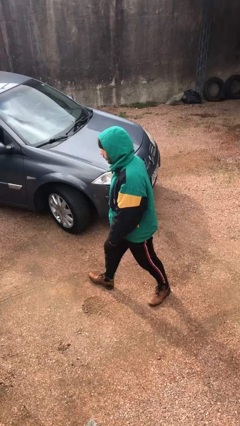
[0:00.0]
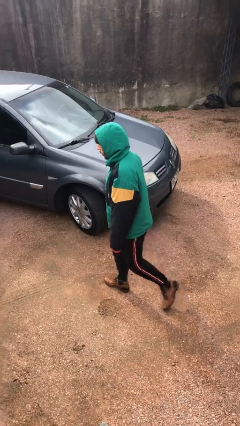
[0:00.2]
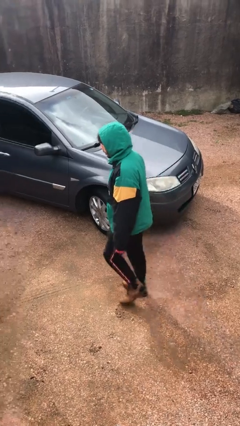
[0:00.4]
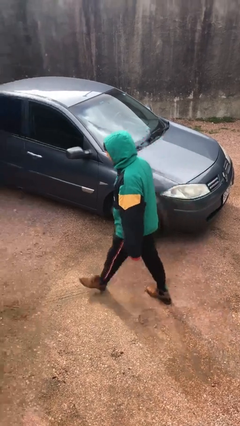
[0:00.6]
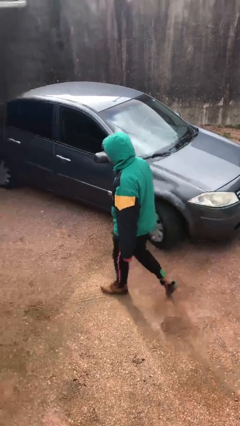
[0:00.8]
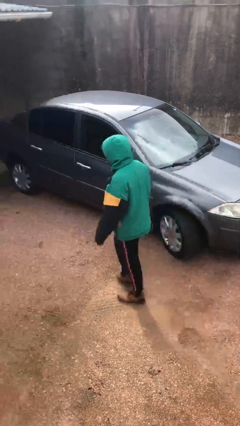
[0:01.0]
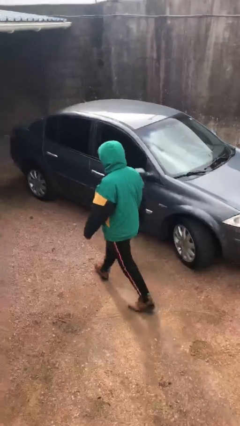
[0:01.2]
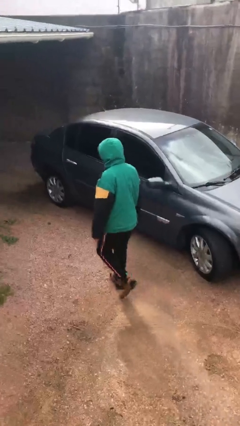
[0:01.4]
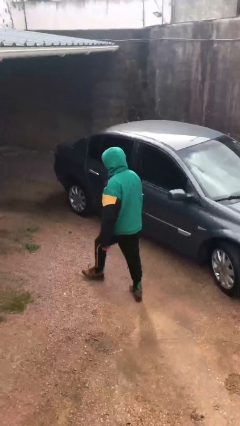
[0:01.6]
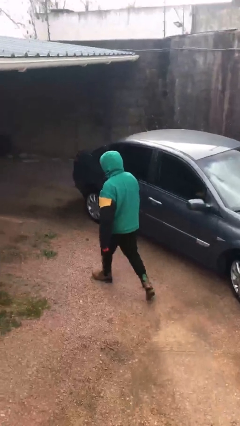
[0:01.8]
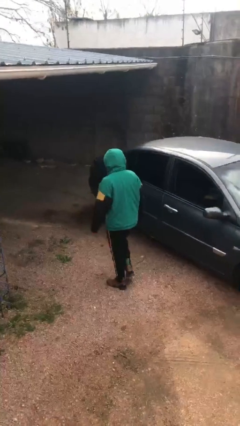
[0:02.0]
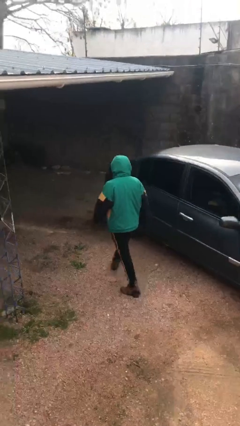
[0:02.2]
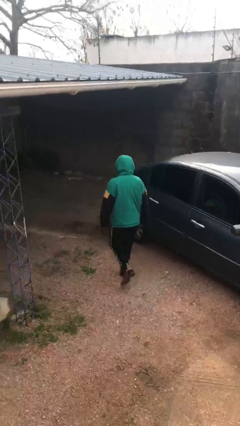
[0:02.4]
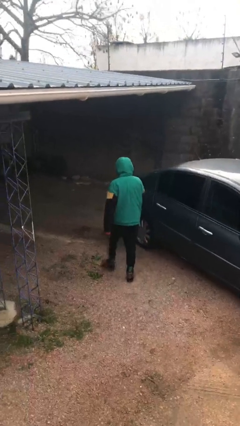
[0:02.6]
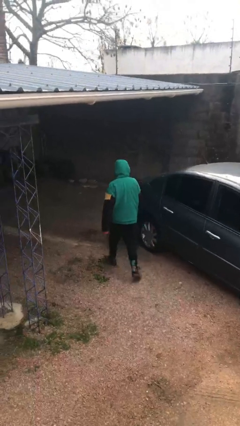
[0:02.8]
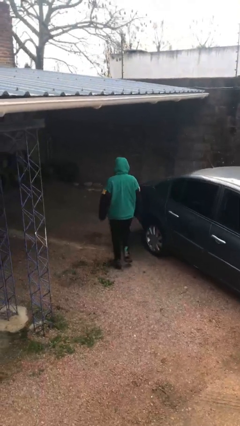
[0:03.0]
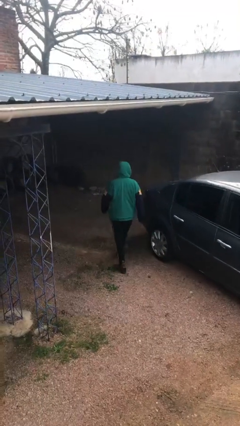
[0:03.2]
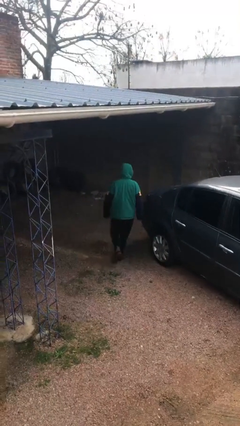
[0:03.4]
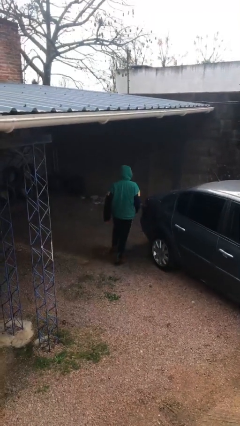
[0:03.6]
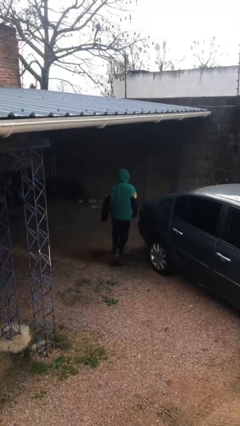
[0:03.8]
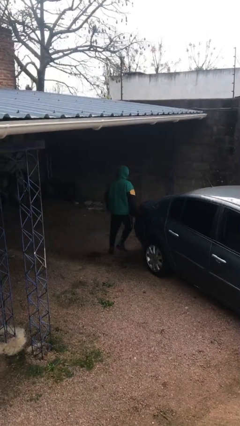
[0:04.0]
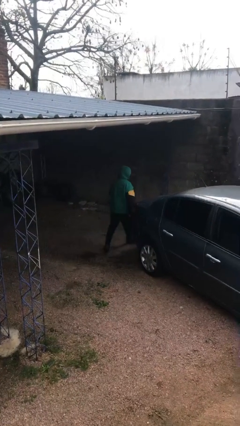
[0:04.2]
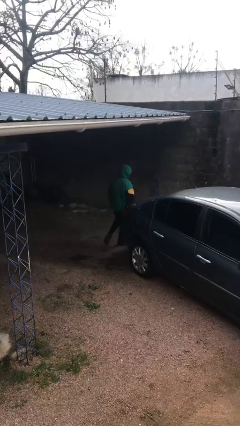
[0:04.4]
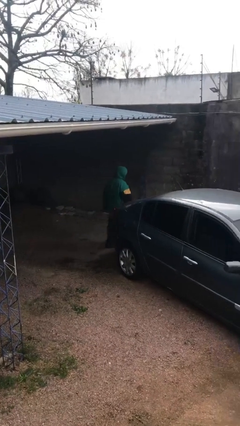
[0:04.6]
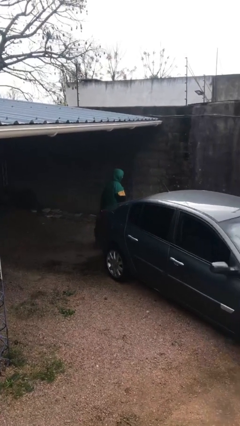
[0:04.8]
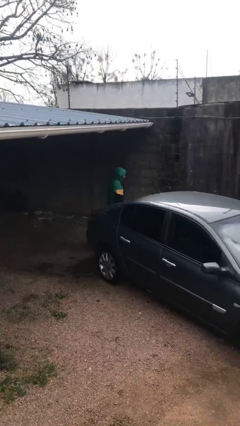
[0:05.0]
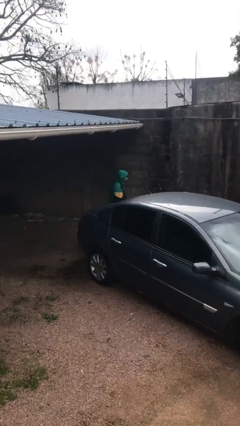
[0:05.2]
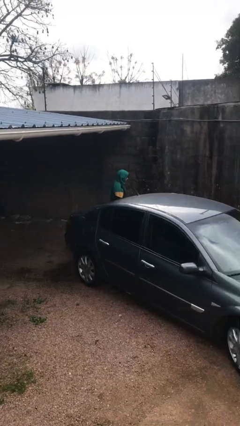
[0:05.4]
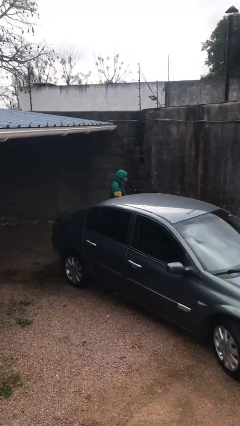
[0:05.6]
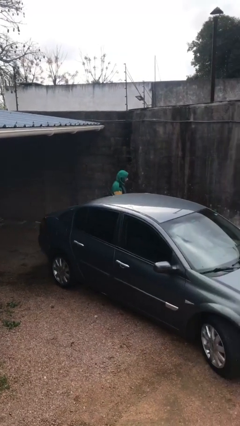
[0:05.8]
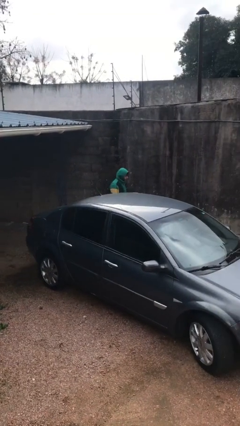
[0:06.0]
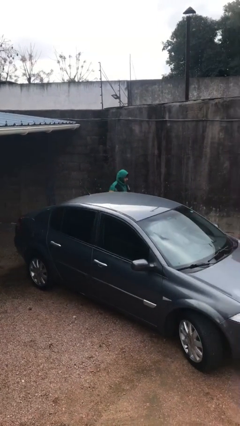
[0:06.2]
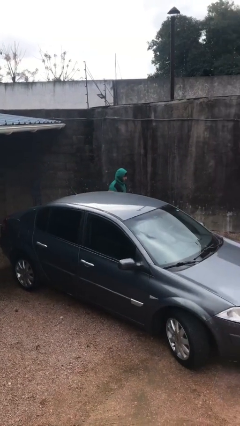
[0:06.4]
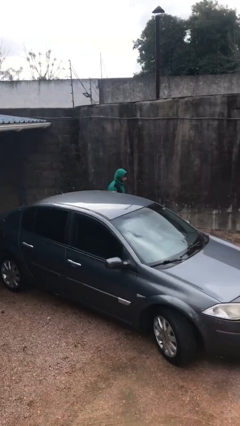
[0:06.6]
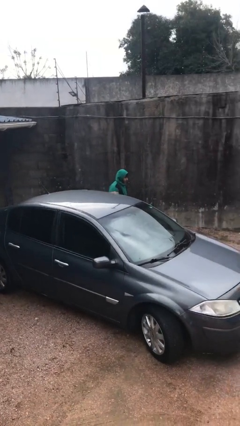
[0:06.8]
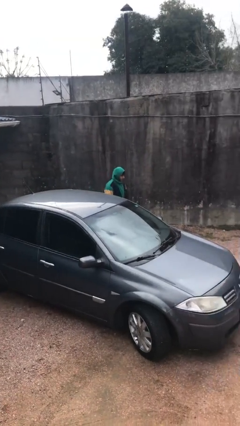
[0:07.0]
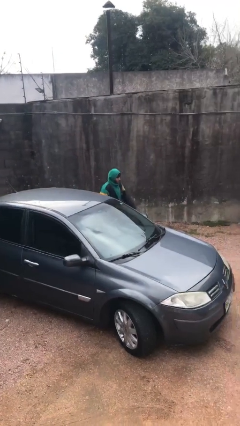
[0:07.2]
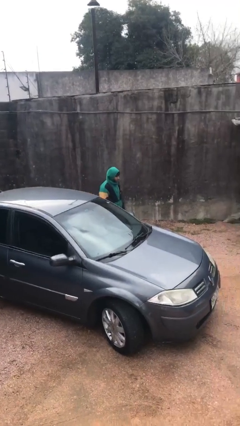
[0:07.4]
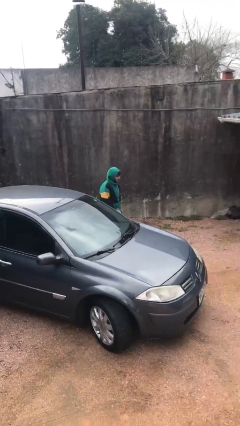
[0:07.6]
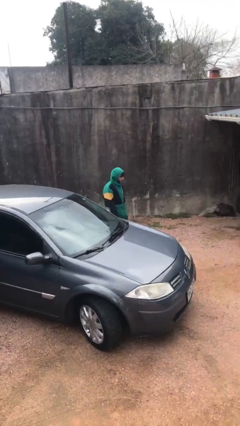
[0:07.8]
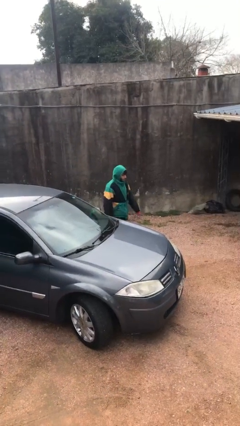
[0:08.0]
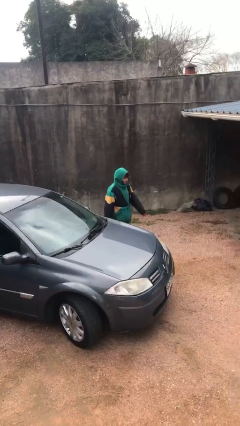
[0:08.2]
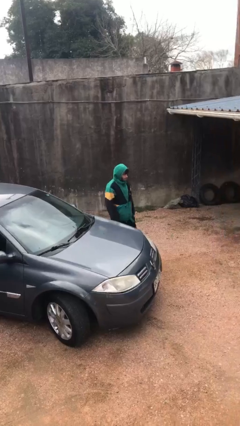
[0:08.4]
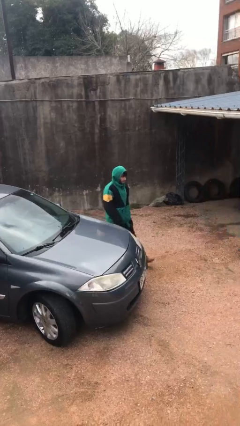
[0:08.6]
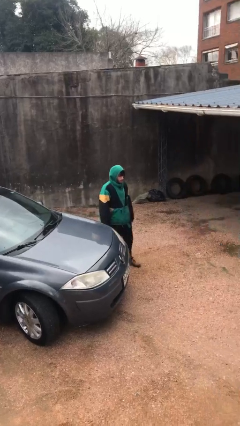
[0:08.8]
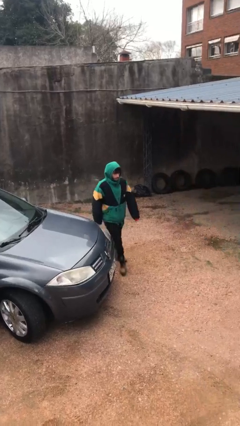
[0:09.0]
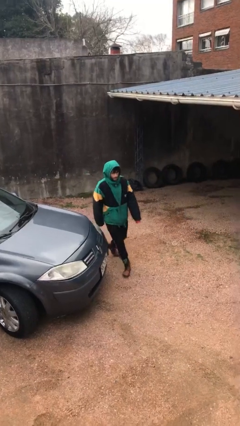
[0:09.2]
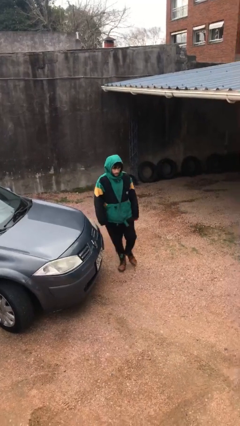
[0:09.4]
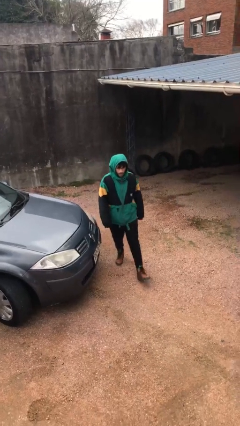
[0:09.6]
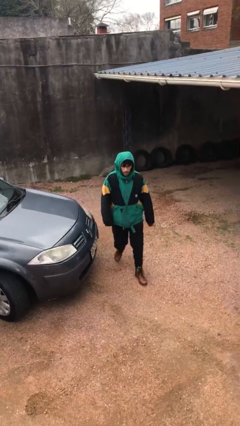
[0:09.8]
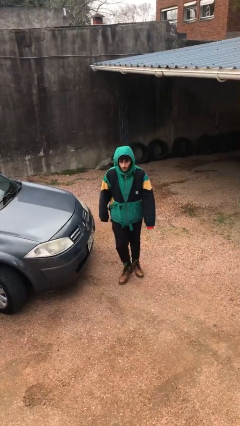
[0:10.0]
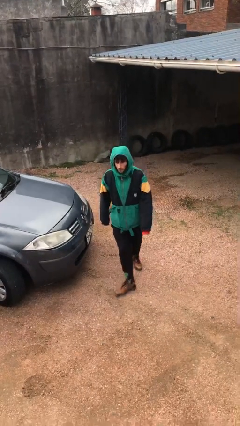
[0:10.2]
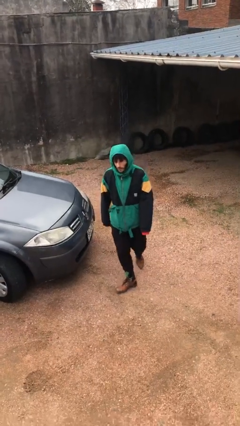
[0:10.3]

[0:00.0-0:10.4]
person walks around car

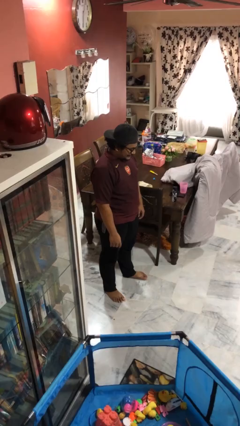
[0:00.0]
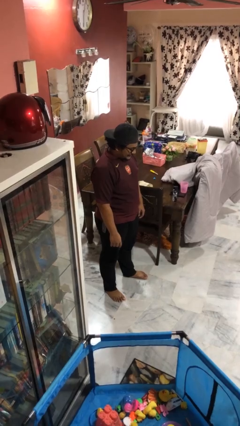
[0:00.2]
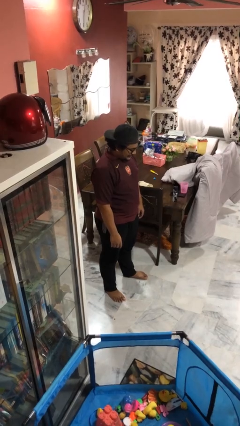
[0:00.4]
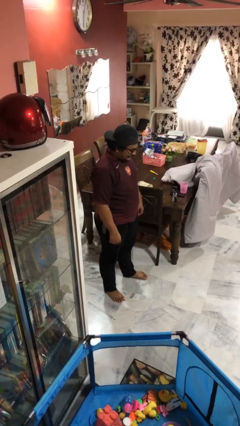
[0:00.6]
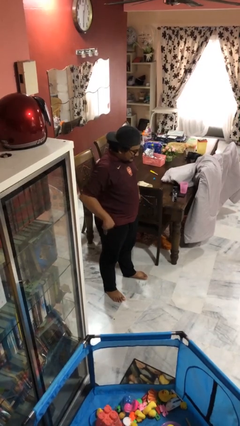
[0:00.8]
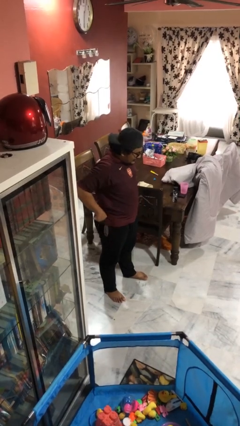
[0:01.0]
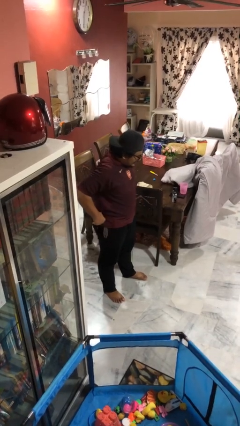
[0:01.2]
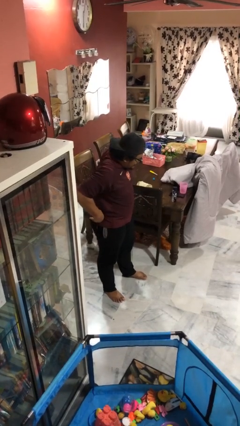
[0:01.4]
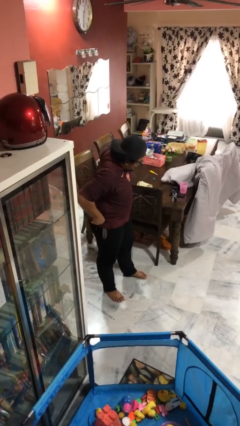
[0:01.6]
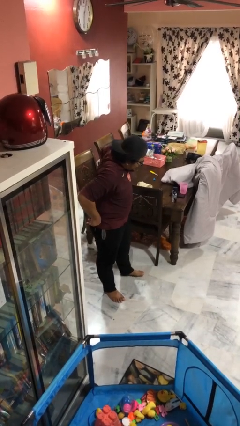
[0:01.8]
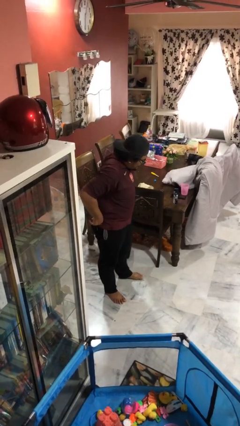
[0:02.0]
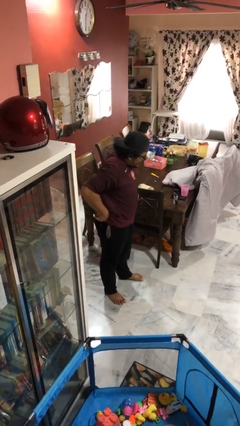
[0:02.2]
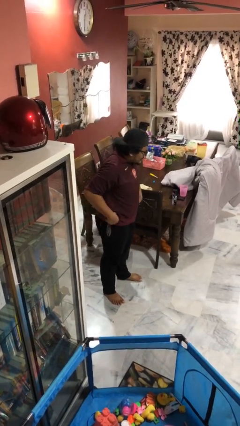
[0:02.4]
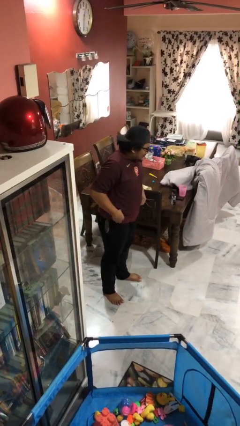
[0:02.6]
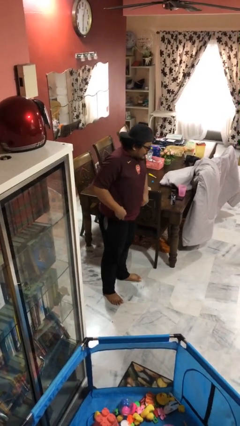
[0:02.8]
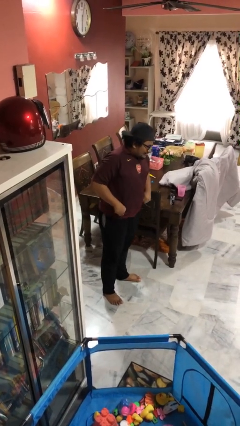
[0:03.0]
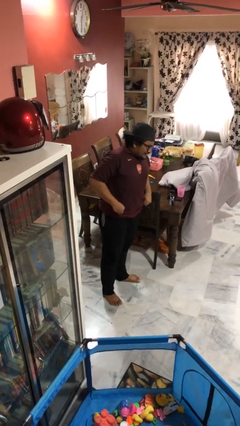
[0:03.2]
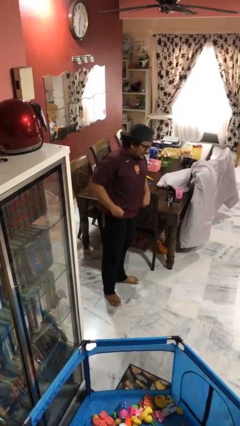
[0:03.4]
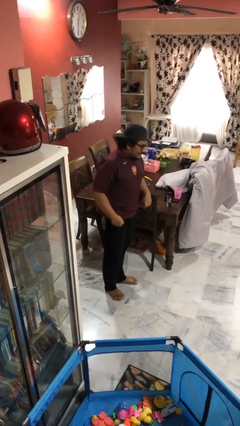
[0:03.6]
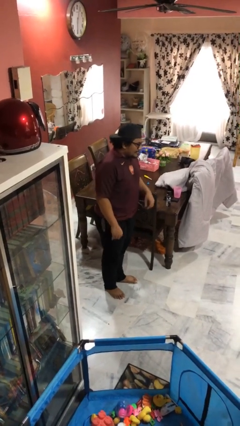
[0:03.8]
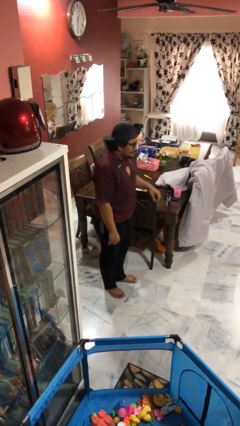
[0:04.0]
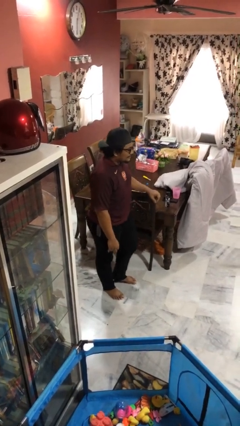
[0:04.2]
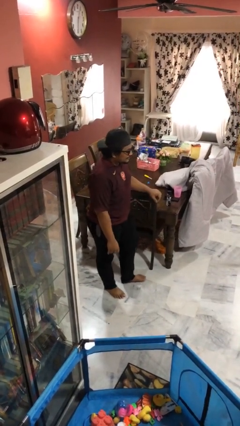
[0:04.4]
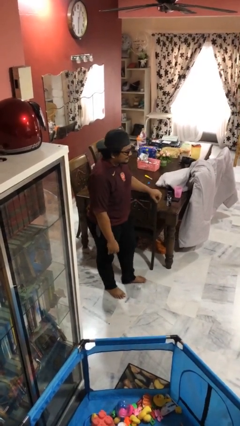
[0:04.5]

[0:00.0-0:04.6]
person hikes up pants

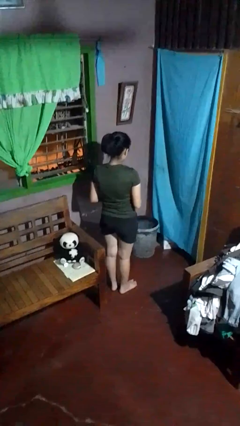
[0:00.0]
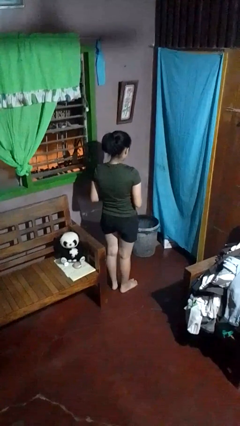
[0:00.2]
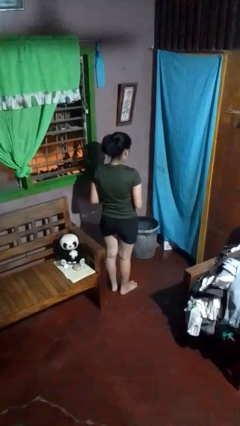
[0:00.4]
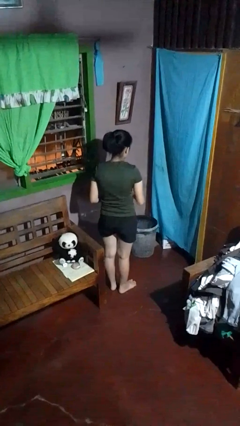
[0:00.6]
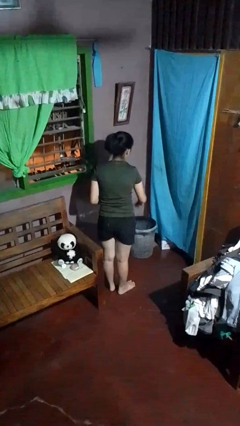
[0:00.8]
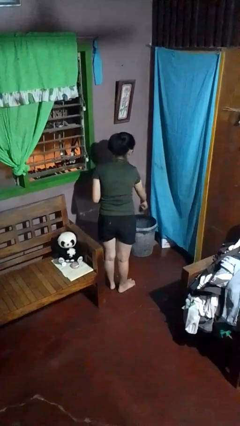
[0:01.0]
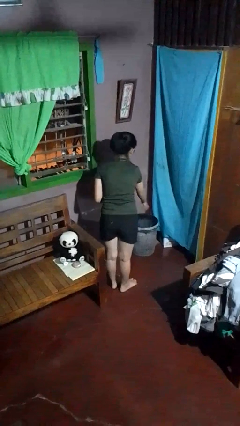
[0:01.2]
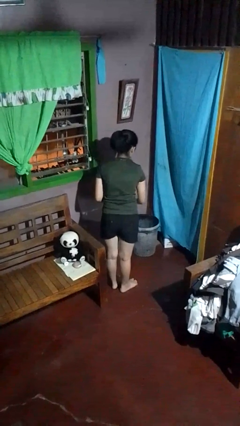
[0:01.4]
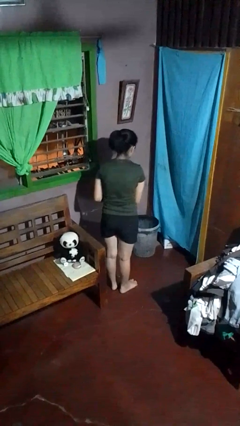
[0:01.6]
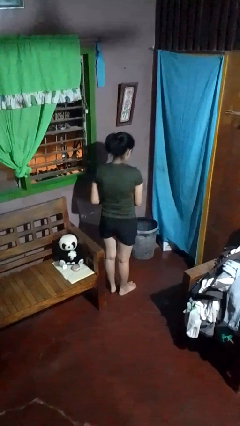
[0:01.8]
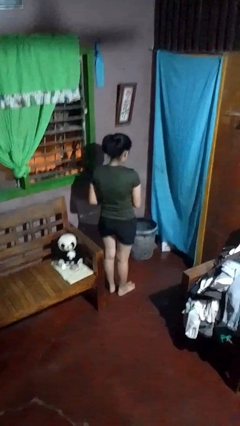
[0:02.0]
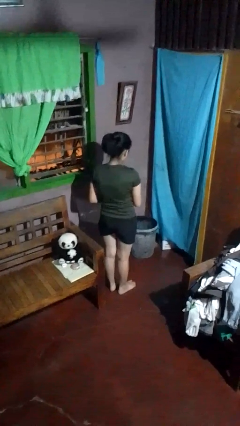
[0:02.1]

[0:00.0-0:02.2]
person discards trash

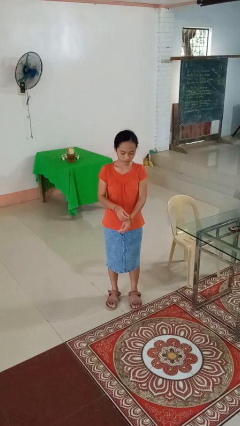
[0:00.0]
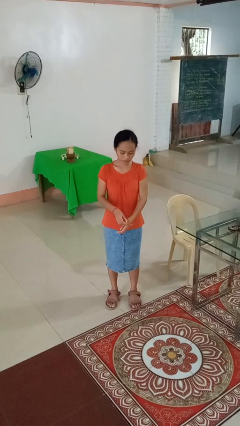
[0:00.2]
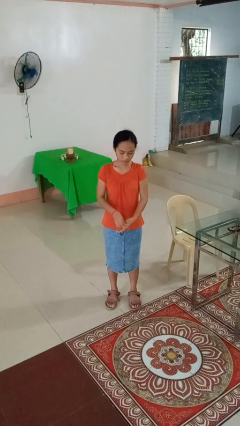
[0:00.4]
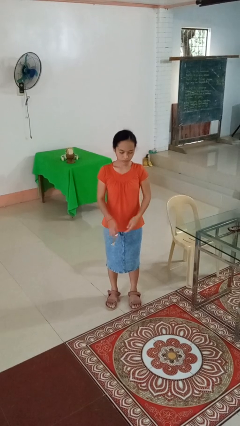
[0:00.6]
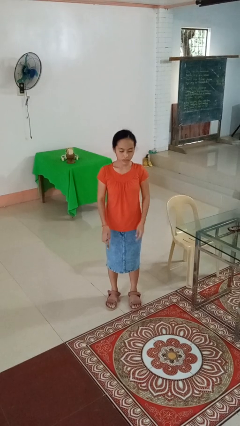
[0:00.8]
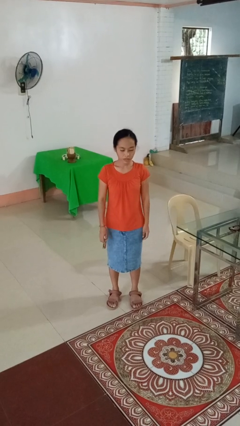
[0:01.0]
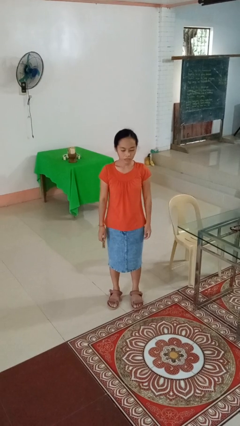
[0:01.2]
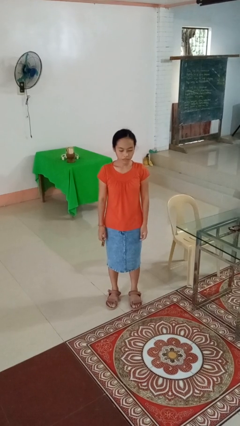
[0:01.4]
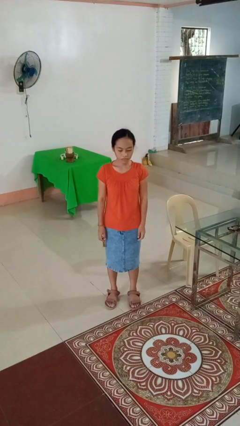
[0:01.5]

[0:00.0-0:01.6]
person takes off wristwatch
